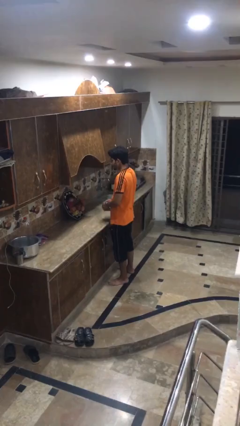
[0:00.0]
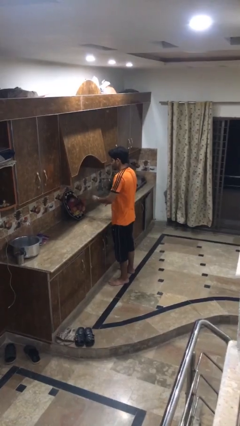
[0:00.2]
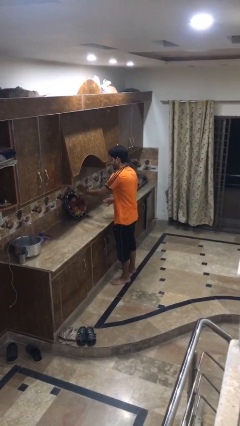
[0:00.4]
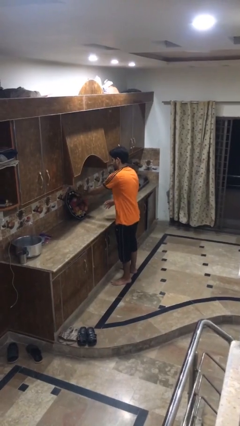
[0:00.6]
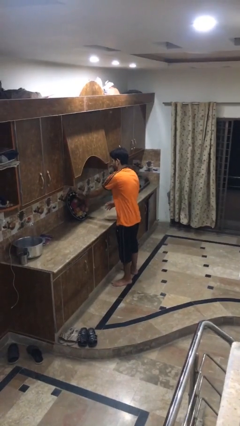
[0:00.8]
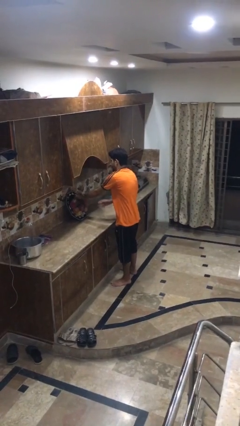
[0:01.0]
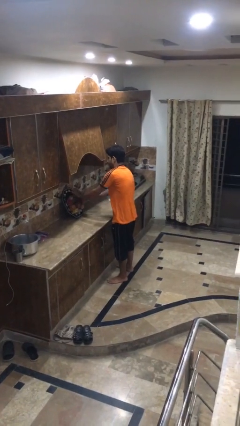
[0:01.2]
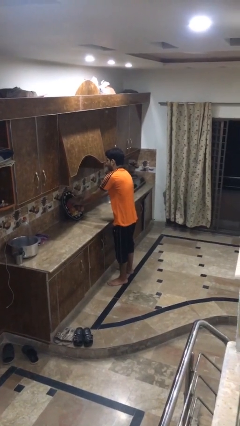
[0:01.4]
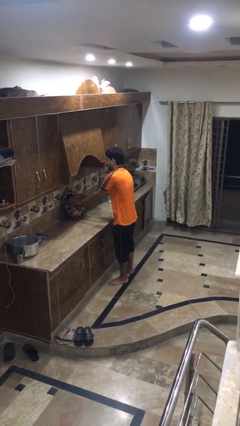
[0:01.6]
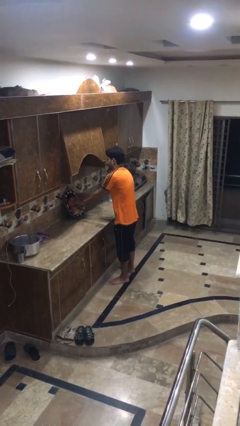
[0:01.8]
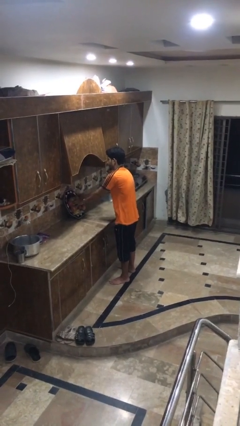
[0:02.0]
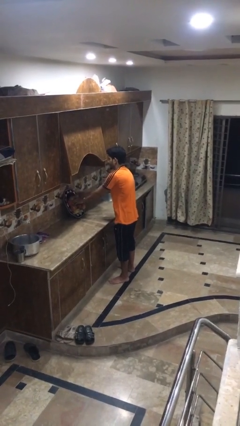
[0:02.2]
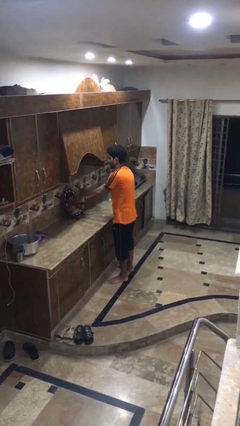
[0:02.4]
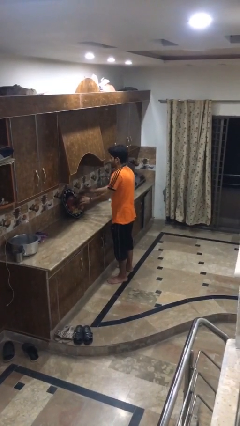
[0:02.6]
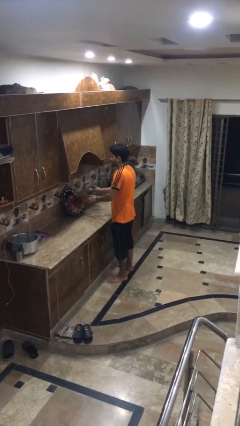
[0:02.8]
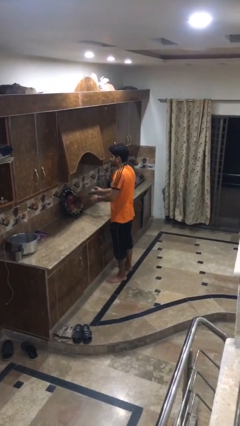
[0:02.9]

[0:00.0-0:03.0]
person arranges flowers in vase

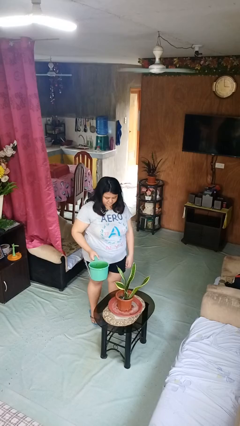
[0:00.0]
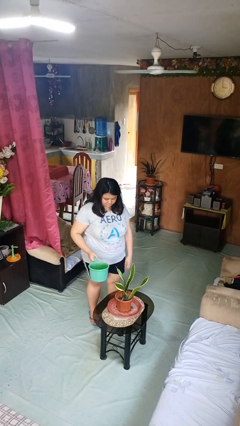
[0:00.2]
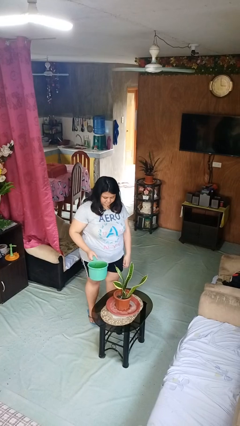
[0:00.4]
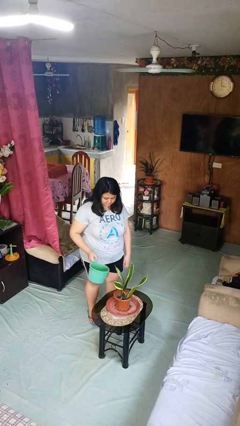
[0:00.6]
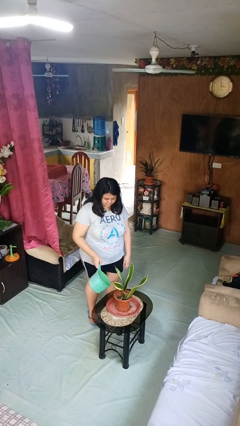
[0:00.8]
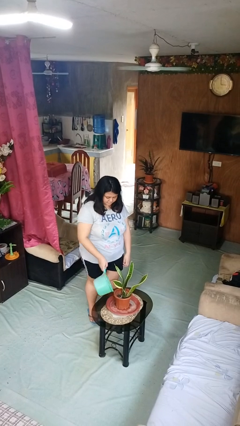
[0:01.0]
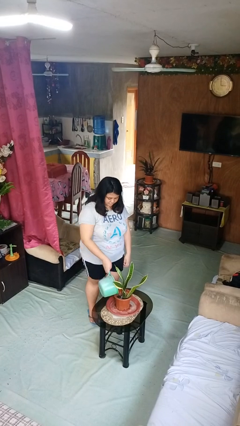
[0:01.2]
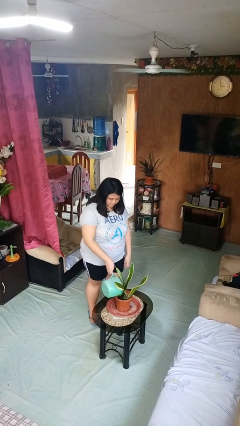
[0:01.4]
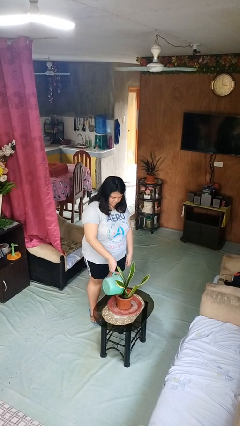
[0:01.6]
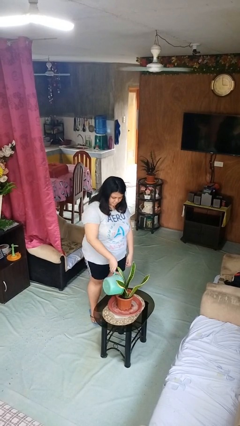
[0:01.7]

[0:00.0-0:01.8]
person waters houseplant

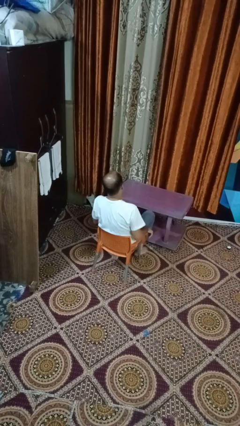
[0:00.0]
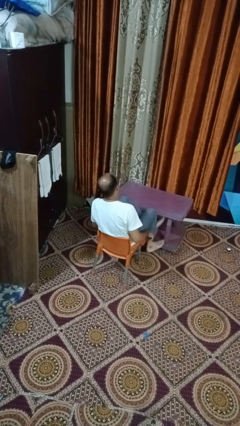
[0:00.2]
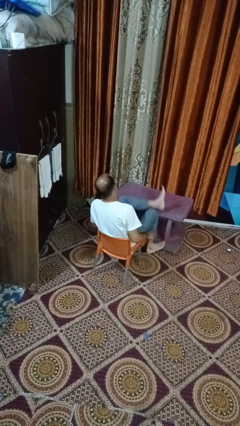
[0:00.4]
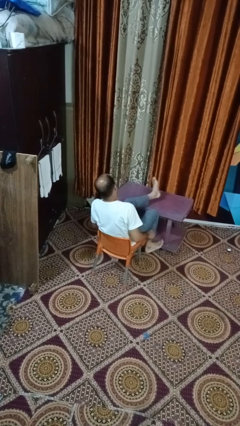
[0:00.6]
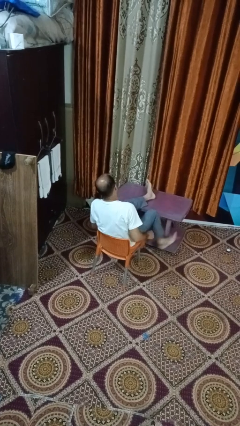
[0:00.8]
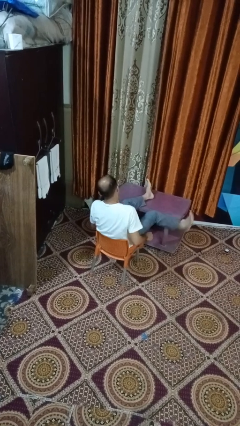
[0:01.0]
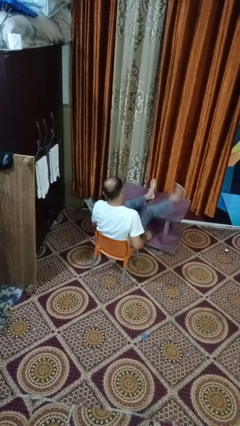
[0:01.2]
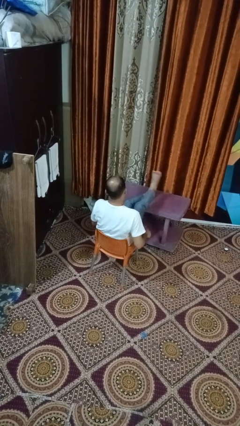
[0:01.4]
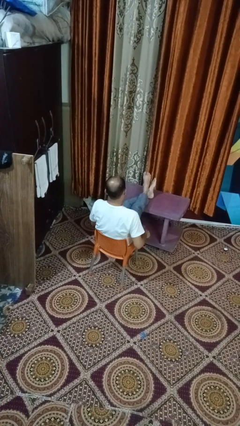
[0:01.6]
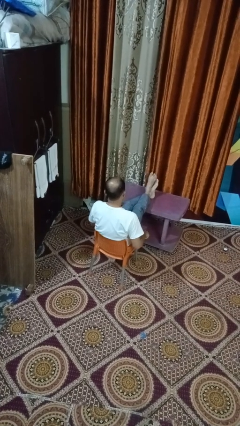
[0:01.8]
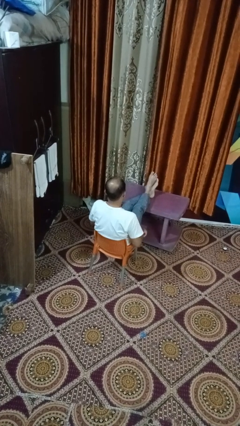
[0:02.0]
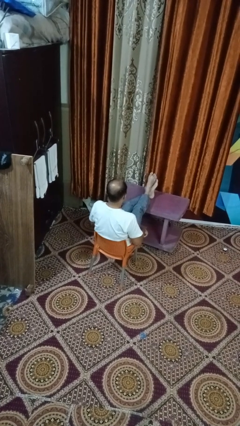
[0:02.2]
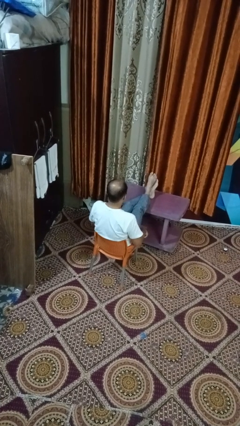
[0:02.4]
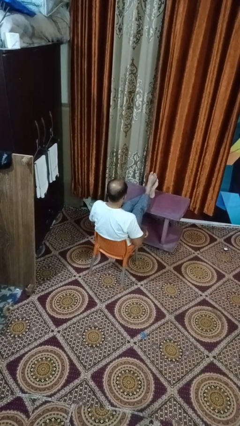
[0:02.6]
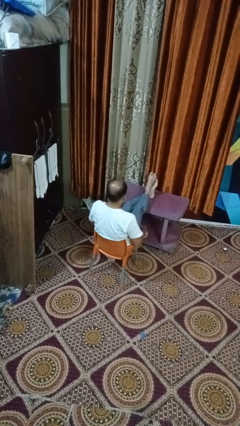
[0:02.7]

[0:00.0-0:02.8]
person puts feet up

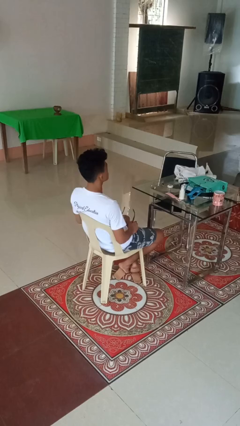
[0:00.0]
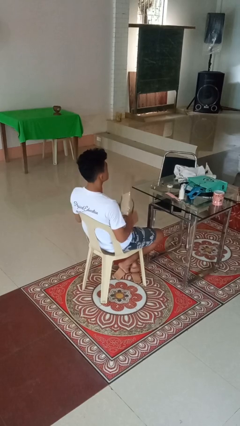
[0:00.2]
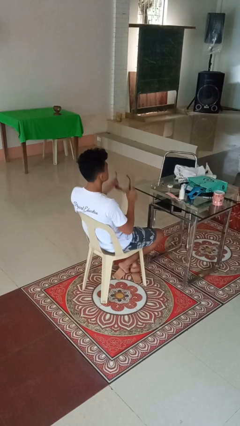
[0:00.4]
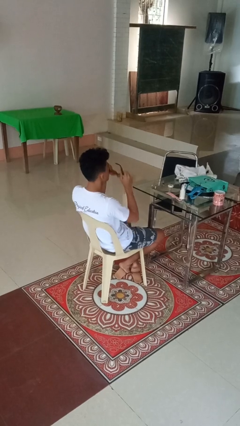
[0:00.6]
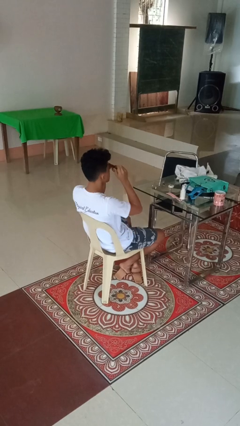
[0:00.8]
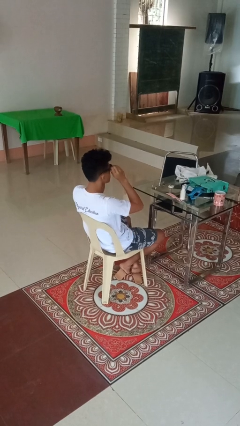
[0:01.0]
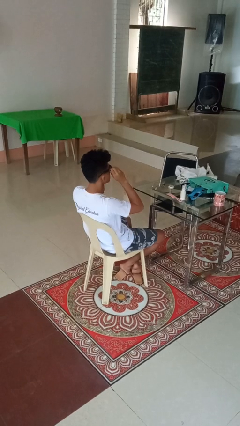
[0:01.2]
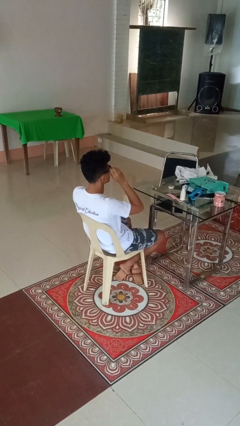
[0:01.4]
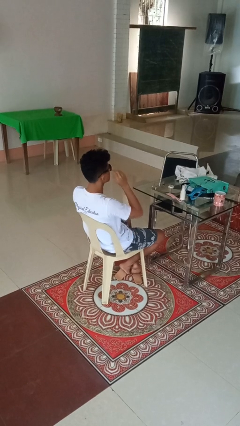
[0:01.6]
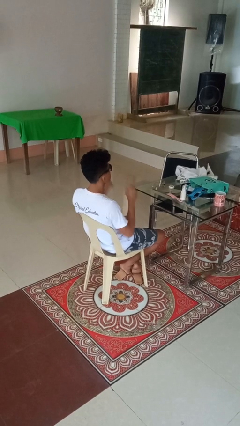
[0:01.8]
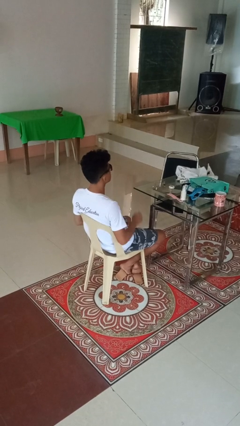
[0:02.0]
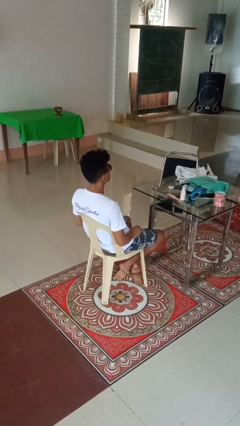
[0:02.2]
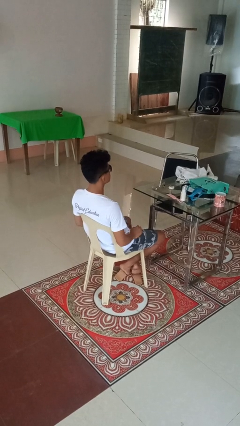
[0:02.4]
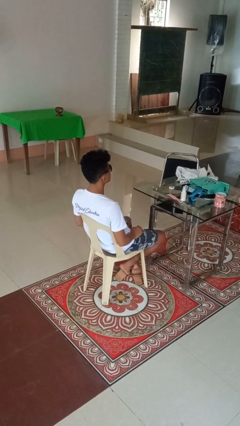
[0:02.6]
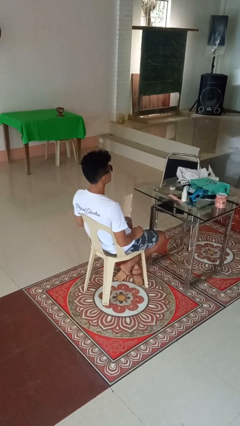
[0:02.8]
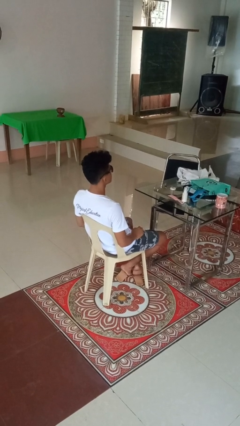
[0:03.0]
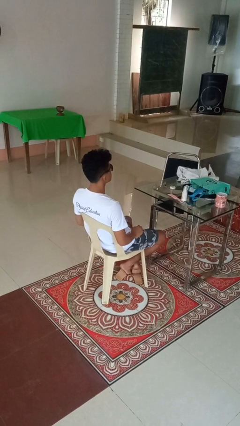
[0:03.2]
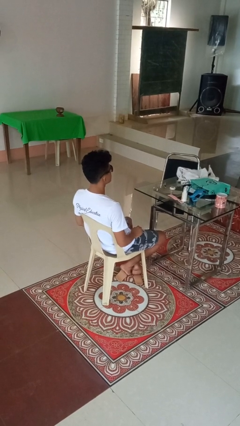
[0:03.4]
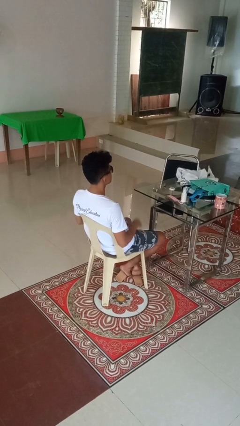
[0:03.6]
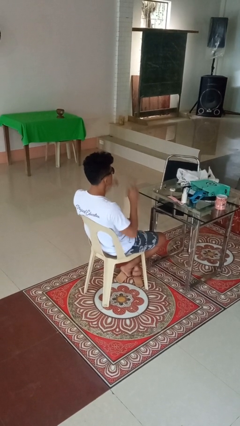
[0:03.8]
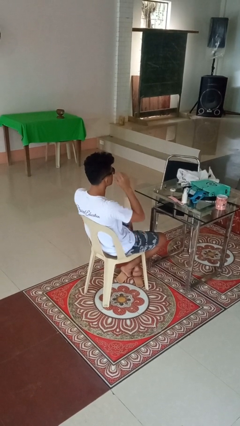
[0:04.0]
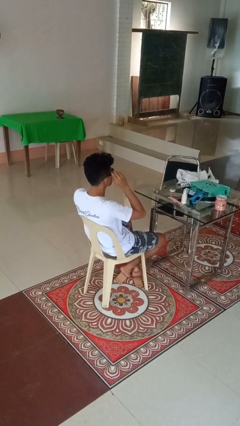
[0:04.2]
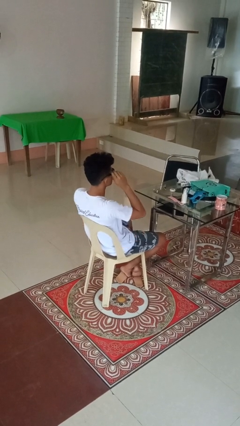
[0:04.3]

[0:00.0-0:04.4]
person puts on sunglasses

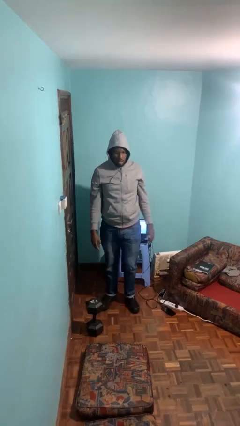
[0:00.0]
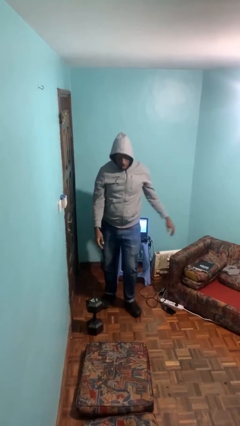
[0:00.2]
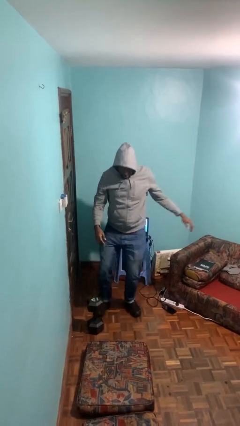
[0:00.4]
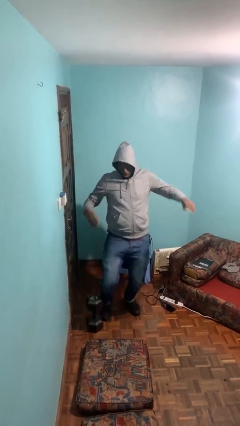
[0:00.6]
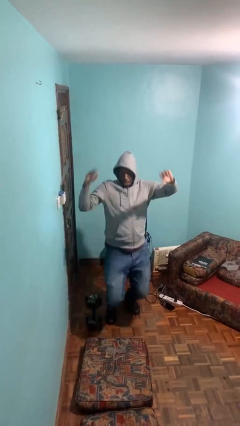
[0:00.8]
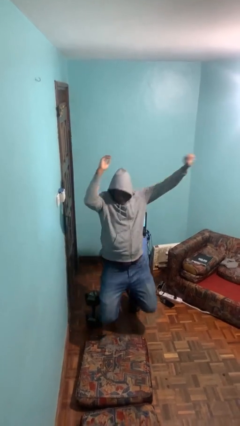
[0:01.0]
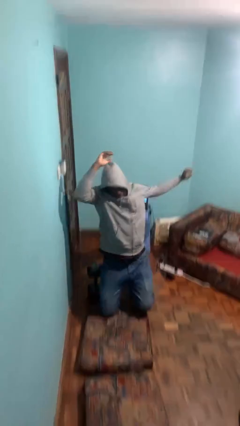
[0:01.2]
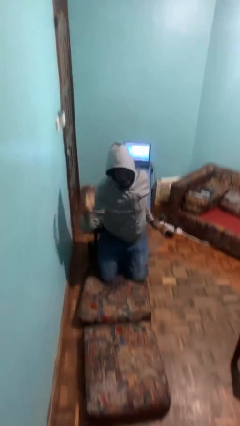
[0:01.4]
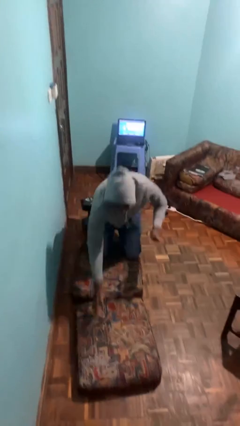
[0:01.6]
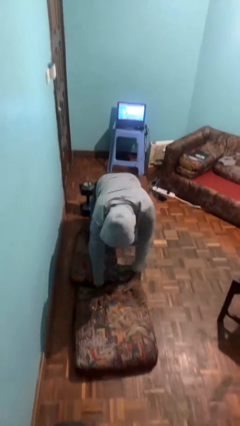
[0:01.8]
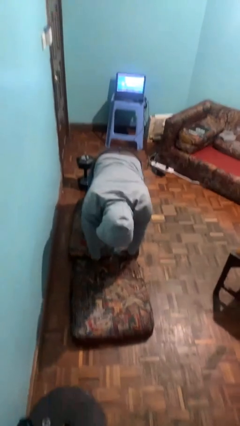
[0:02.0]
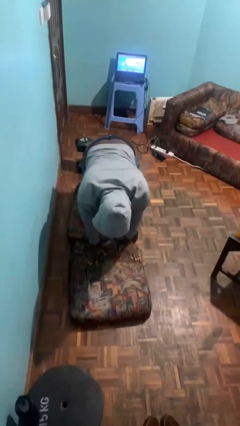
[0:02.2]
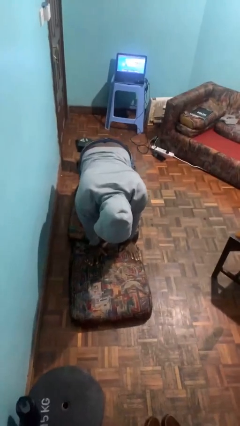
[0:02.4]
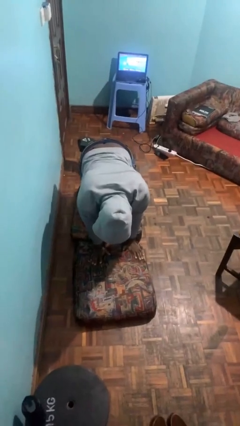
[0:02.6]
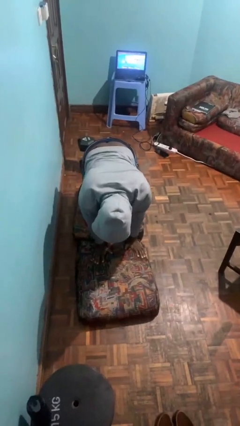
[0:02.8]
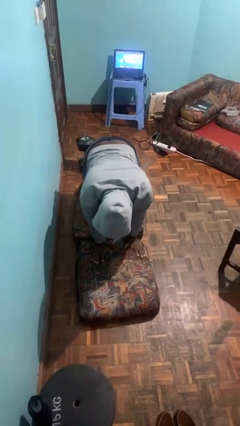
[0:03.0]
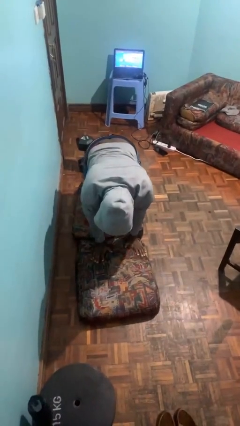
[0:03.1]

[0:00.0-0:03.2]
person trips on object on floor

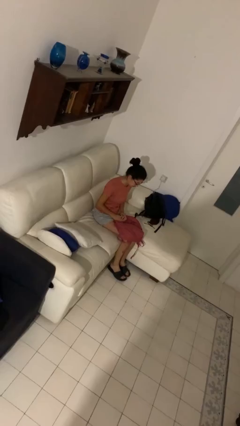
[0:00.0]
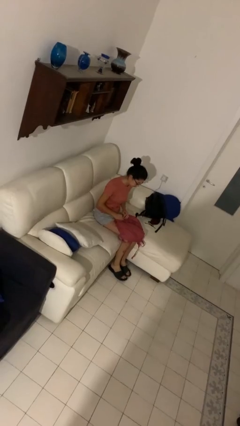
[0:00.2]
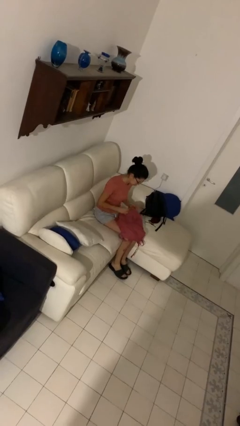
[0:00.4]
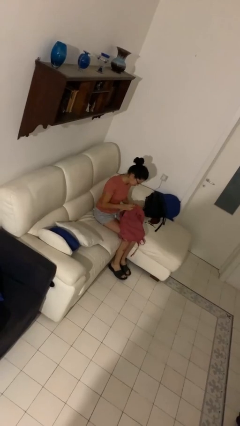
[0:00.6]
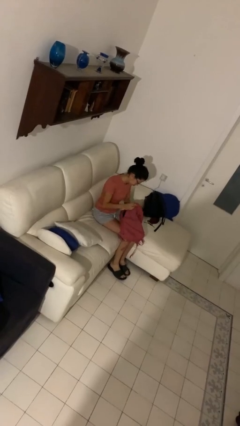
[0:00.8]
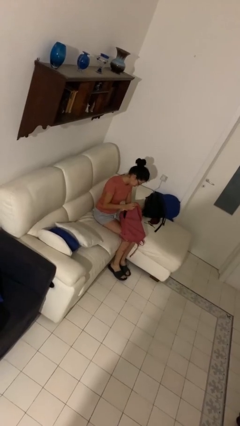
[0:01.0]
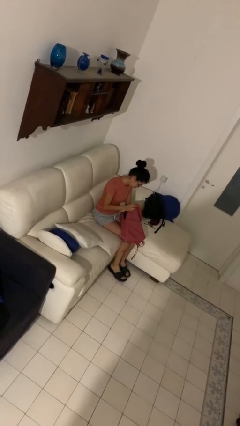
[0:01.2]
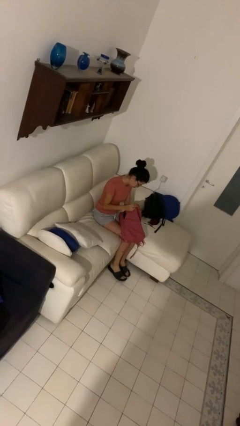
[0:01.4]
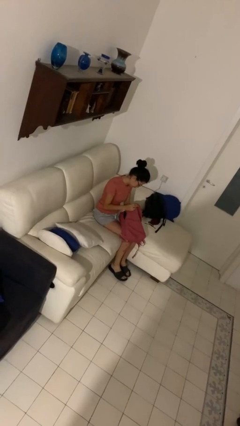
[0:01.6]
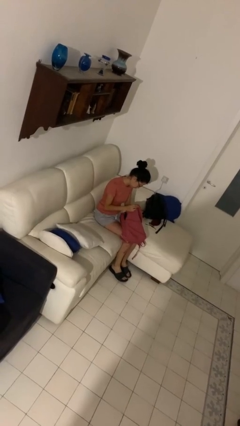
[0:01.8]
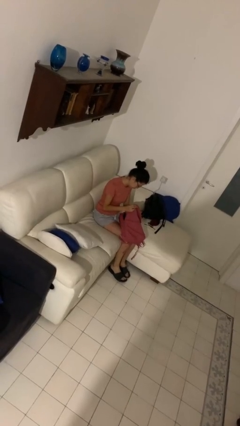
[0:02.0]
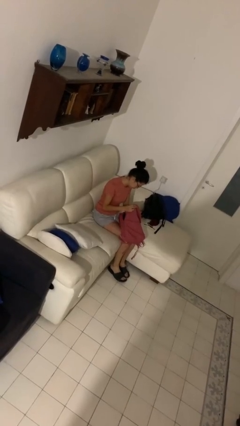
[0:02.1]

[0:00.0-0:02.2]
person searches in purse
